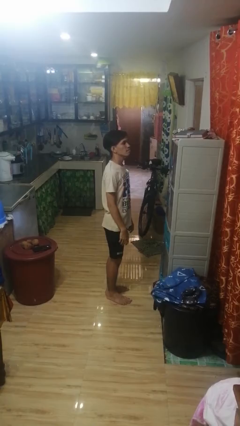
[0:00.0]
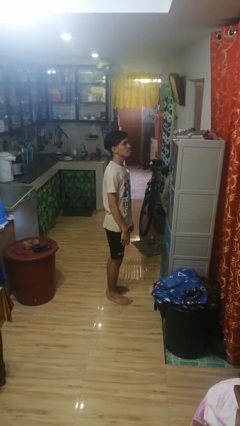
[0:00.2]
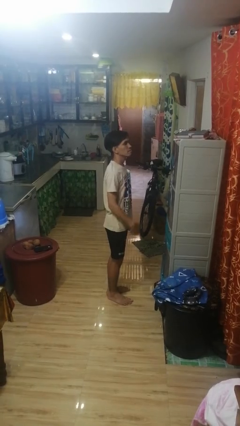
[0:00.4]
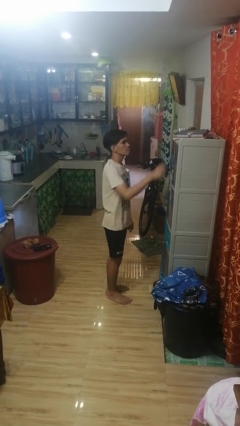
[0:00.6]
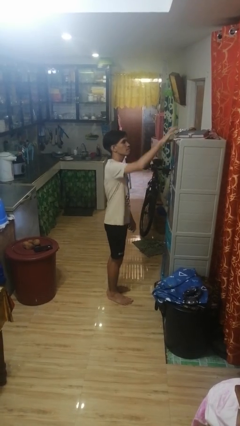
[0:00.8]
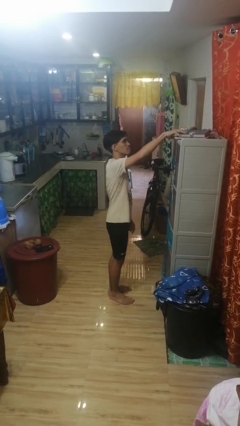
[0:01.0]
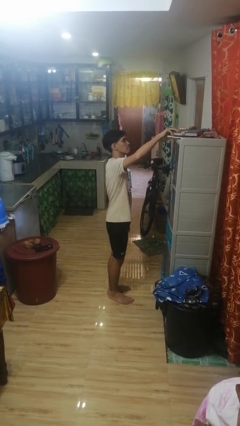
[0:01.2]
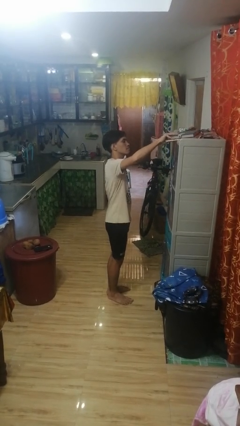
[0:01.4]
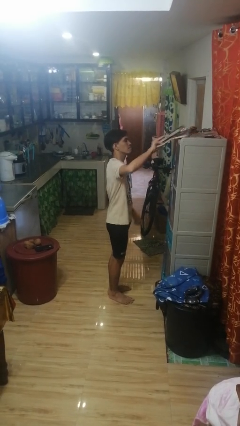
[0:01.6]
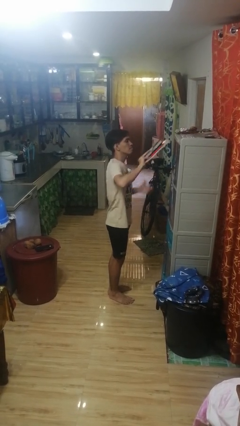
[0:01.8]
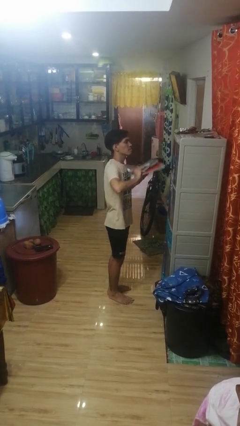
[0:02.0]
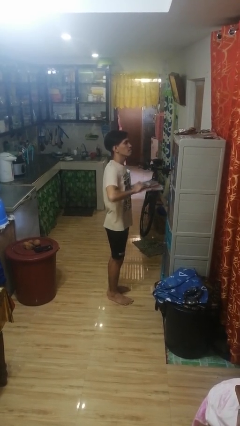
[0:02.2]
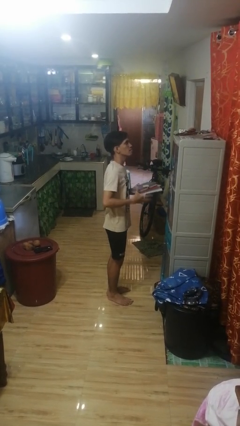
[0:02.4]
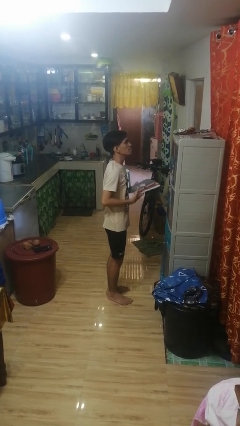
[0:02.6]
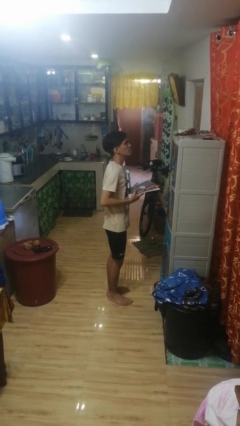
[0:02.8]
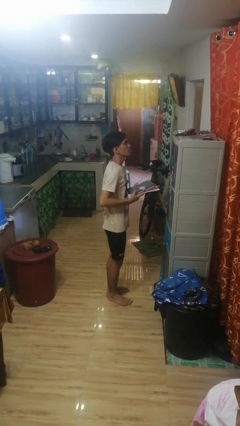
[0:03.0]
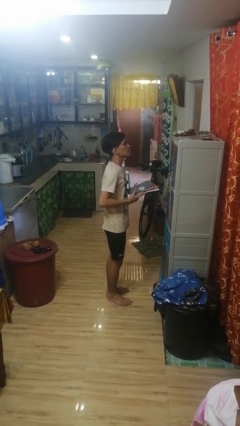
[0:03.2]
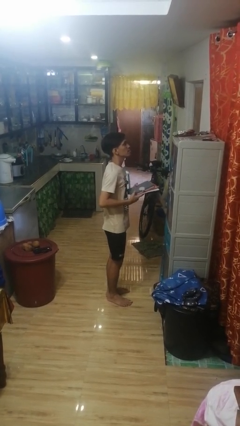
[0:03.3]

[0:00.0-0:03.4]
person picks up object from shelf

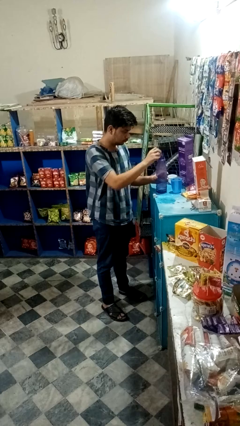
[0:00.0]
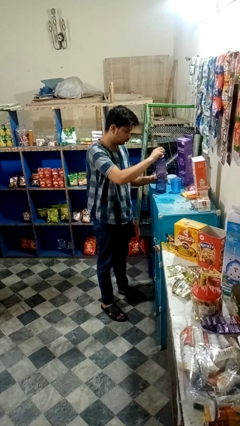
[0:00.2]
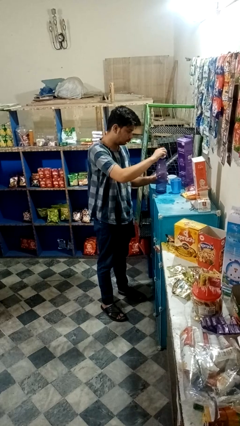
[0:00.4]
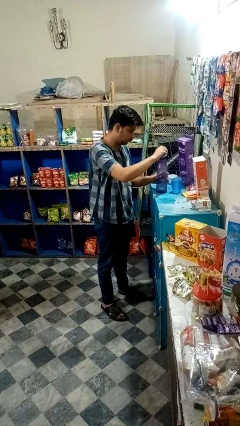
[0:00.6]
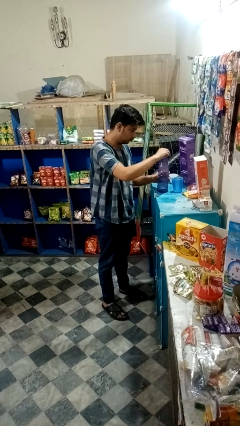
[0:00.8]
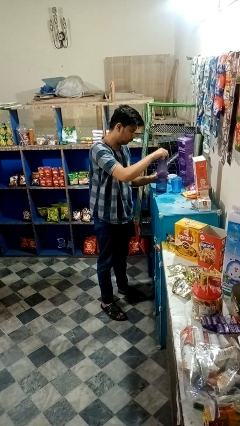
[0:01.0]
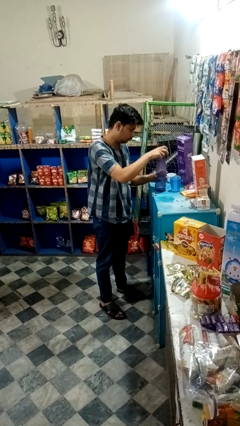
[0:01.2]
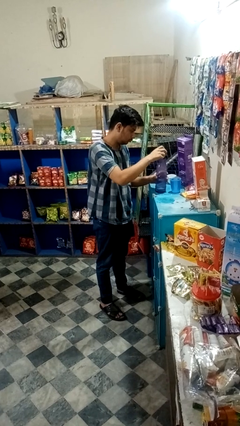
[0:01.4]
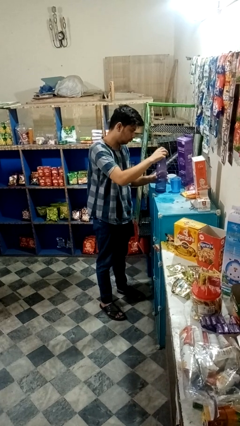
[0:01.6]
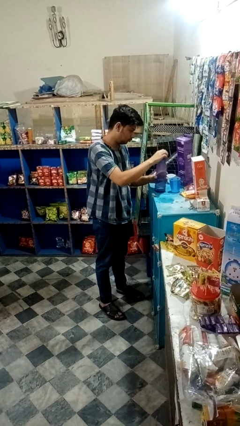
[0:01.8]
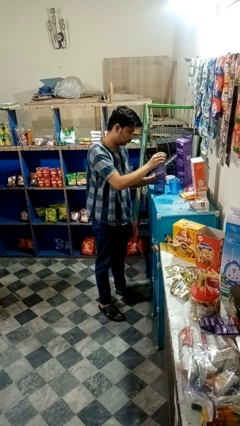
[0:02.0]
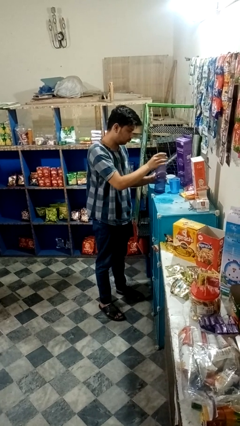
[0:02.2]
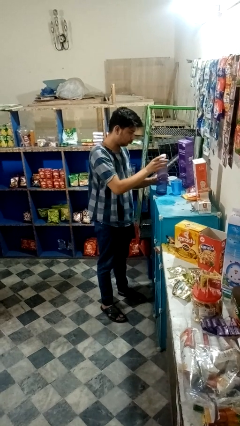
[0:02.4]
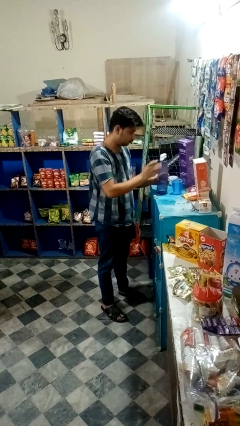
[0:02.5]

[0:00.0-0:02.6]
person screws lid to bottle

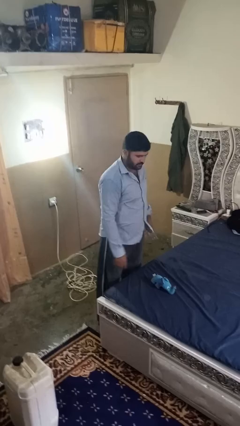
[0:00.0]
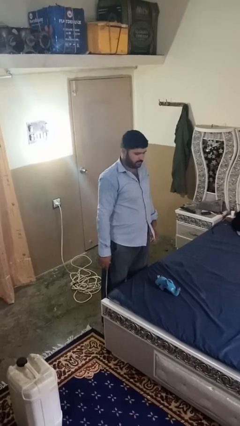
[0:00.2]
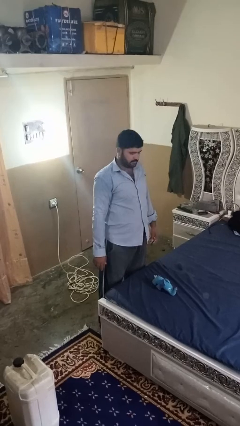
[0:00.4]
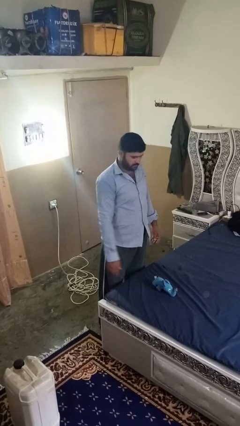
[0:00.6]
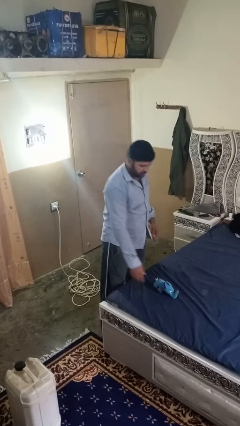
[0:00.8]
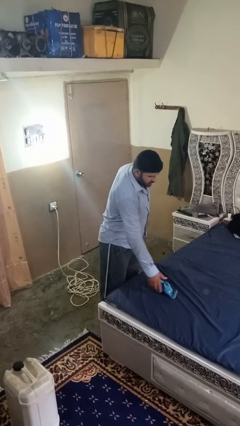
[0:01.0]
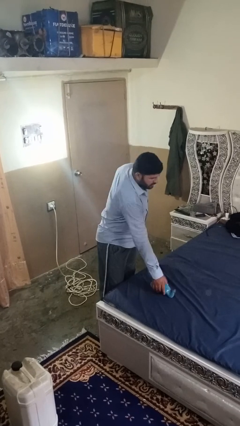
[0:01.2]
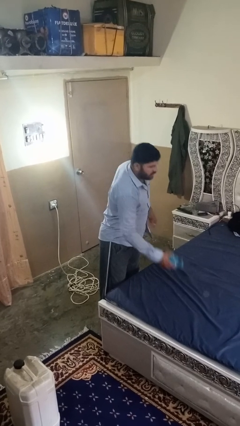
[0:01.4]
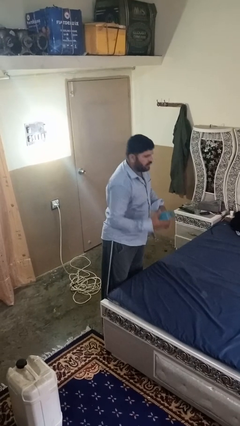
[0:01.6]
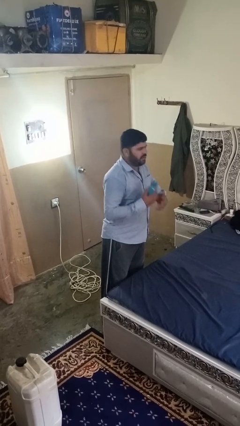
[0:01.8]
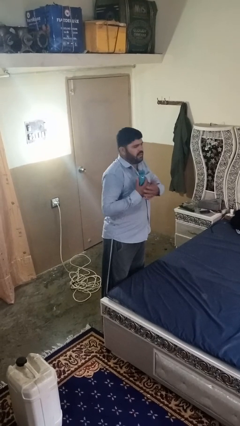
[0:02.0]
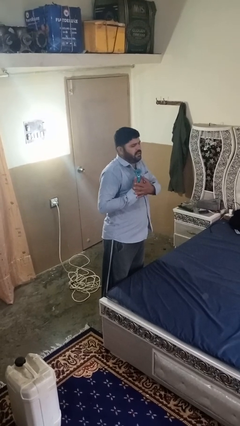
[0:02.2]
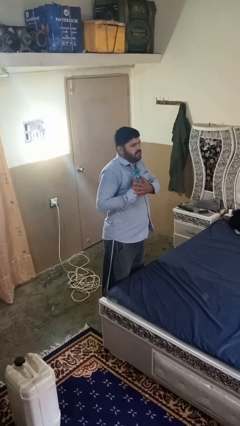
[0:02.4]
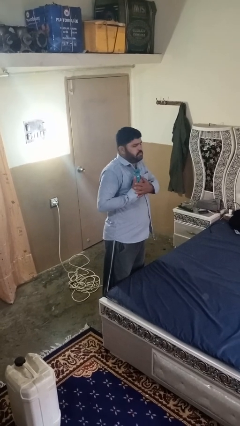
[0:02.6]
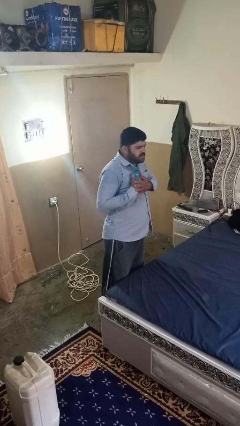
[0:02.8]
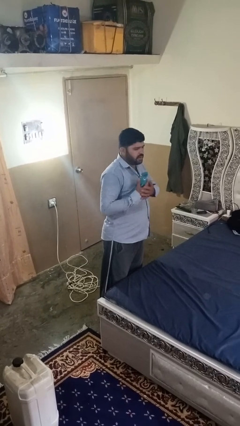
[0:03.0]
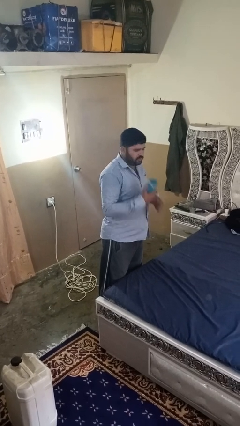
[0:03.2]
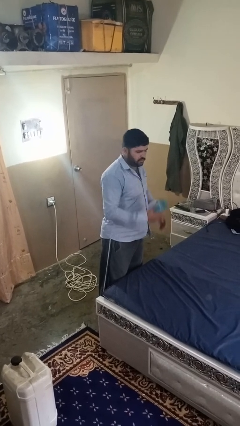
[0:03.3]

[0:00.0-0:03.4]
person hugs stuffed animal

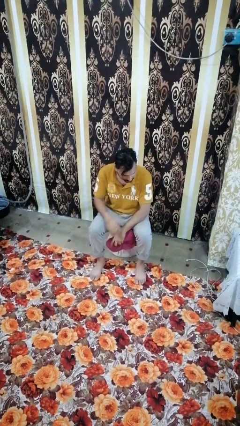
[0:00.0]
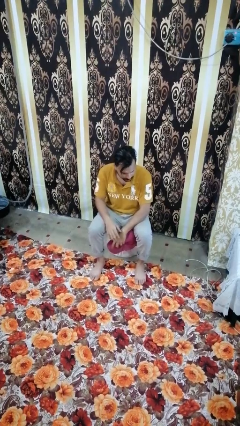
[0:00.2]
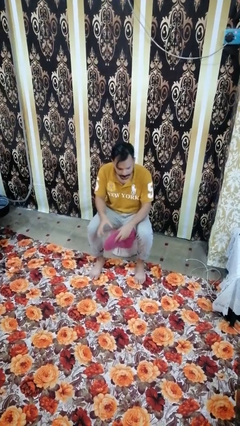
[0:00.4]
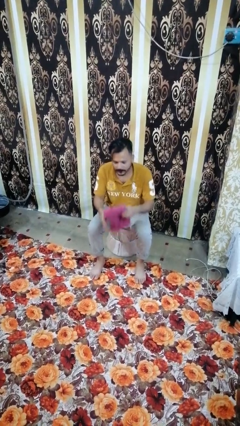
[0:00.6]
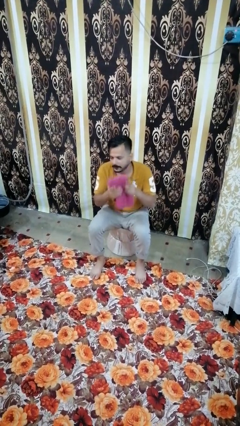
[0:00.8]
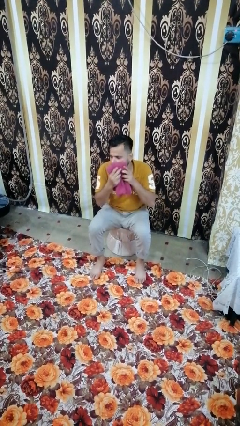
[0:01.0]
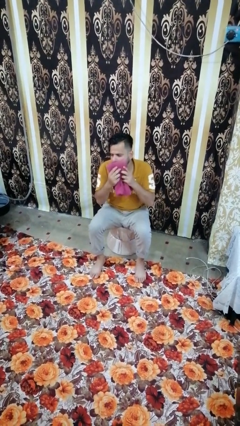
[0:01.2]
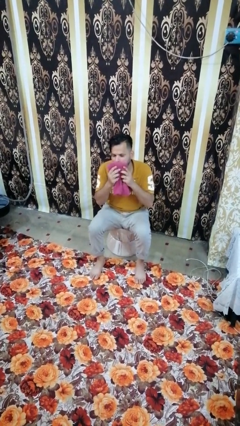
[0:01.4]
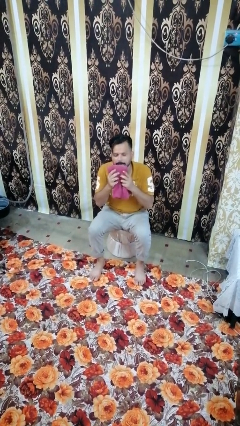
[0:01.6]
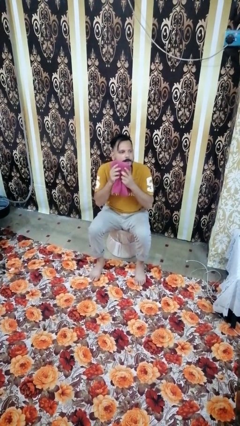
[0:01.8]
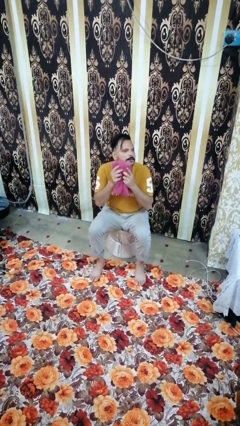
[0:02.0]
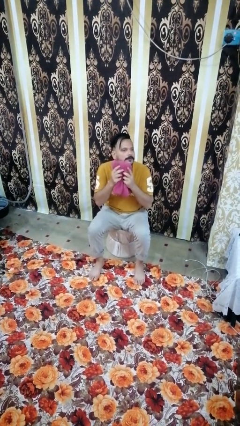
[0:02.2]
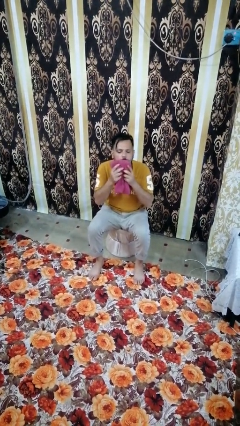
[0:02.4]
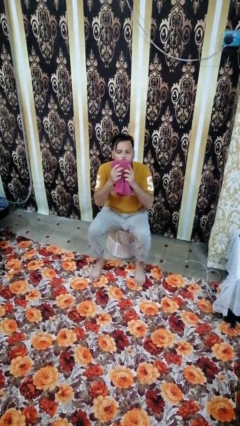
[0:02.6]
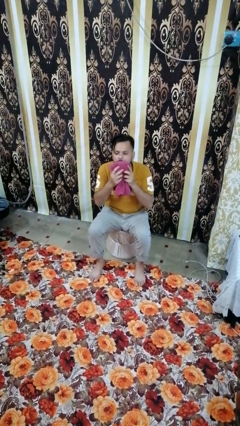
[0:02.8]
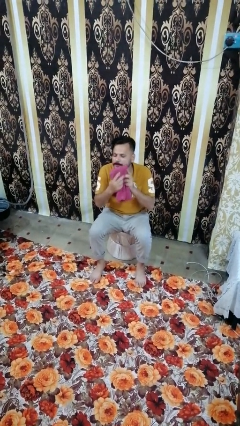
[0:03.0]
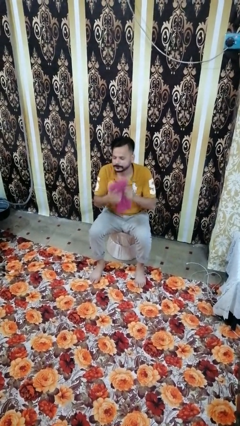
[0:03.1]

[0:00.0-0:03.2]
person wipes mouth with napkin

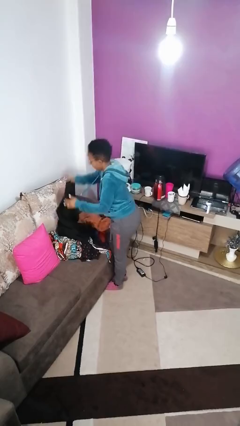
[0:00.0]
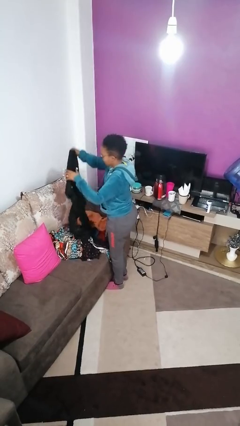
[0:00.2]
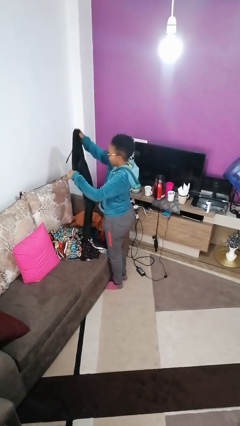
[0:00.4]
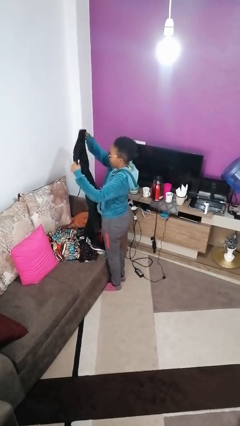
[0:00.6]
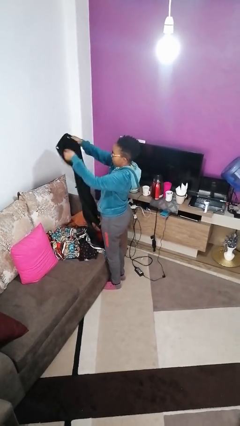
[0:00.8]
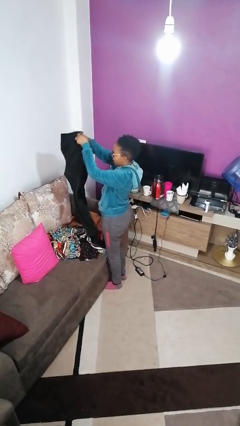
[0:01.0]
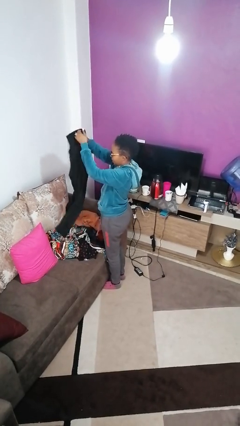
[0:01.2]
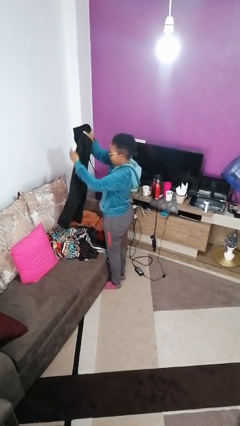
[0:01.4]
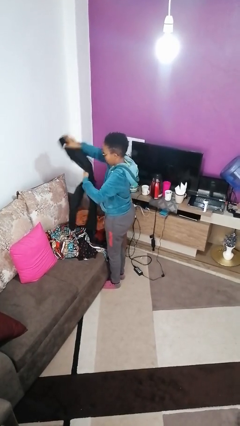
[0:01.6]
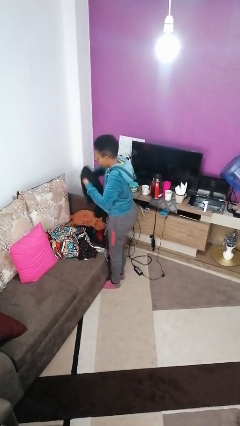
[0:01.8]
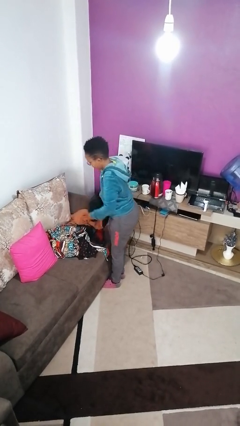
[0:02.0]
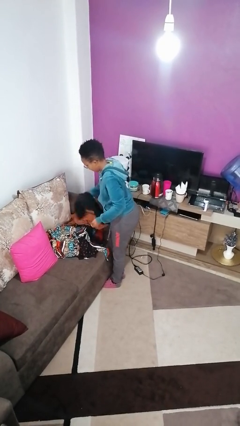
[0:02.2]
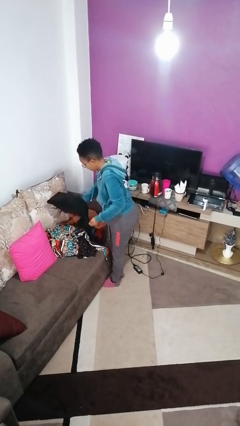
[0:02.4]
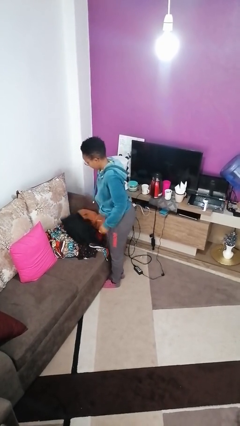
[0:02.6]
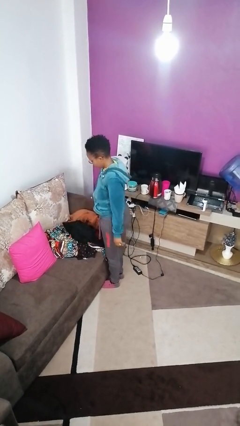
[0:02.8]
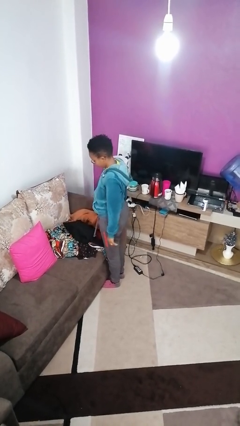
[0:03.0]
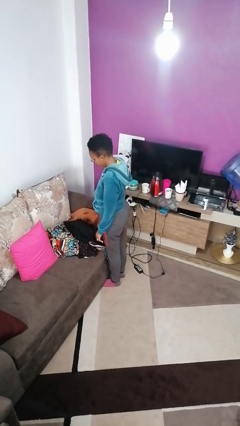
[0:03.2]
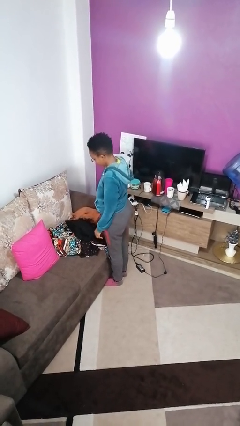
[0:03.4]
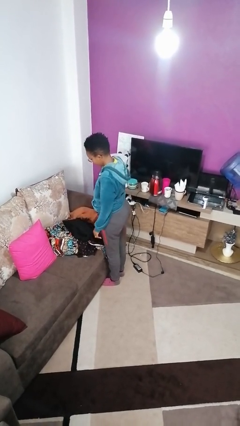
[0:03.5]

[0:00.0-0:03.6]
person folds pants

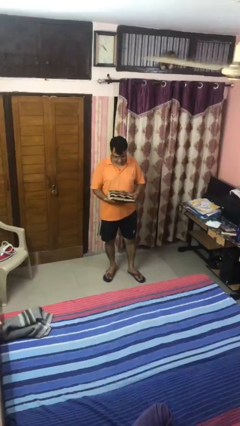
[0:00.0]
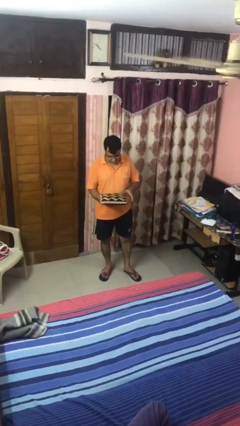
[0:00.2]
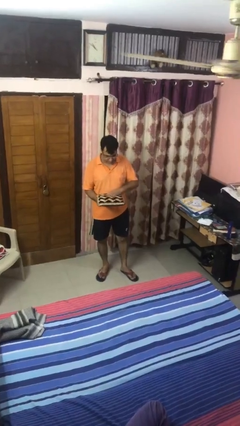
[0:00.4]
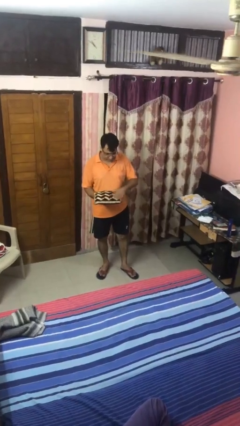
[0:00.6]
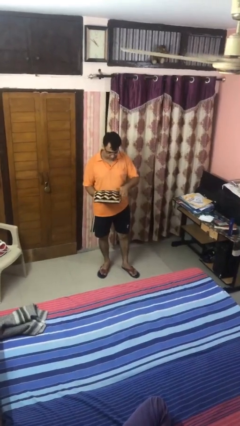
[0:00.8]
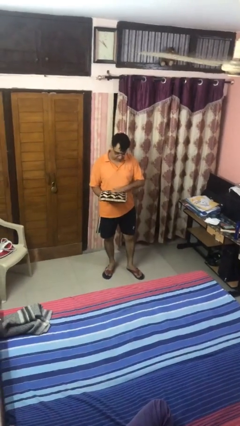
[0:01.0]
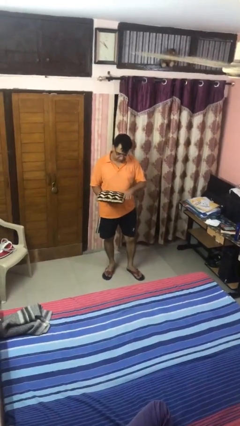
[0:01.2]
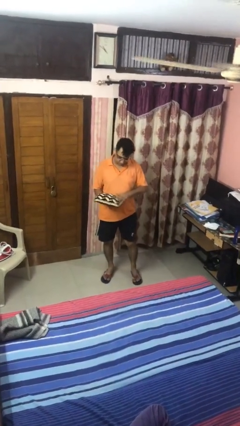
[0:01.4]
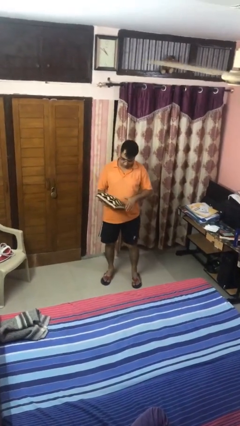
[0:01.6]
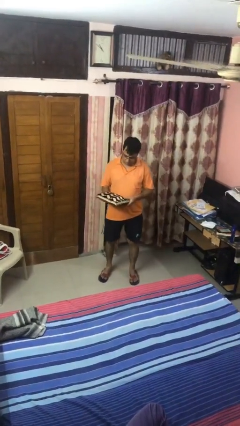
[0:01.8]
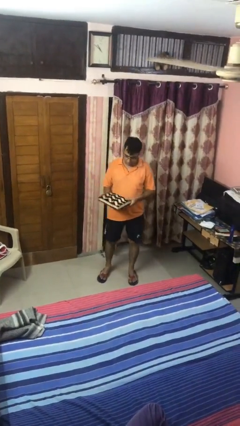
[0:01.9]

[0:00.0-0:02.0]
person waves hand over object
